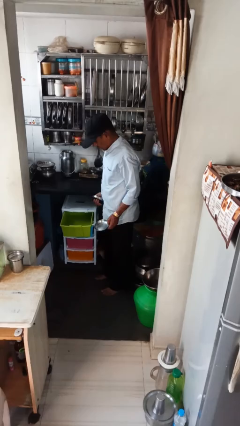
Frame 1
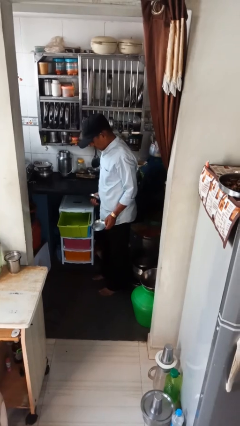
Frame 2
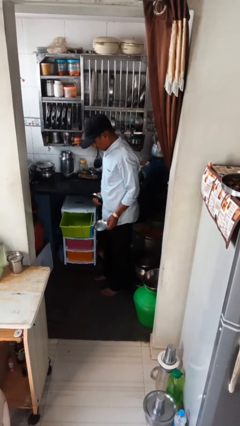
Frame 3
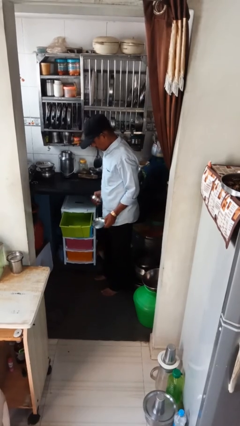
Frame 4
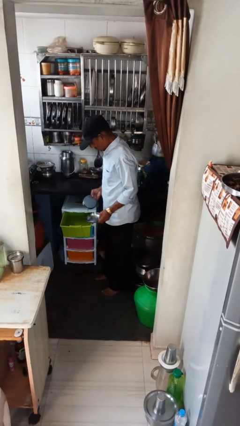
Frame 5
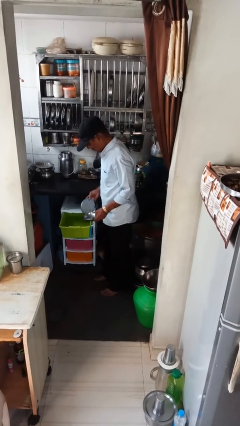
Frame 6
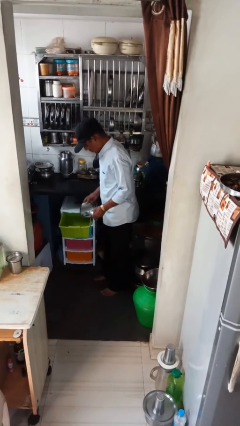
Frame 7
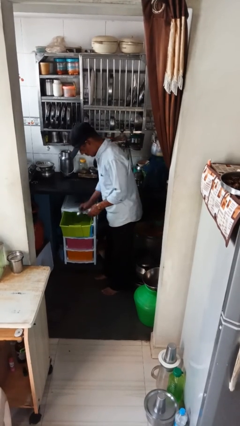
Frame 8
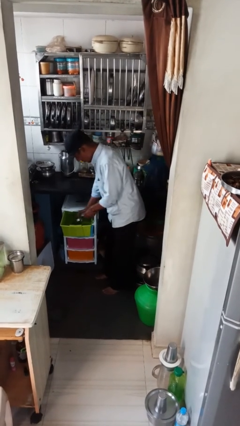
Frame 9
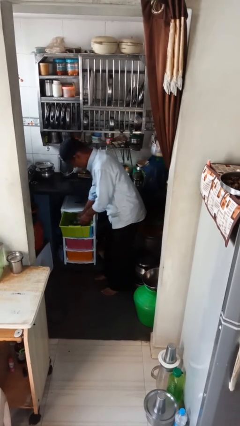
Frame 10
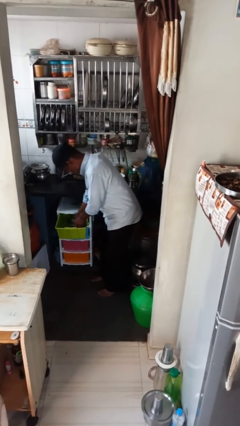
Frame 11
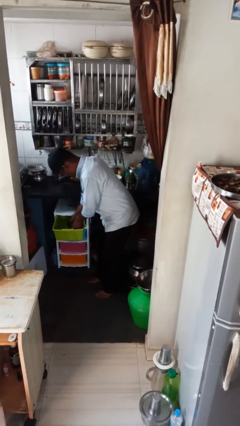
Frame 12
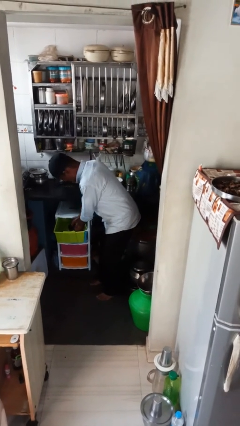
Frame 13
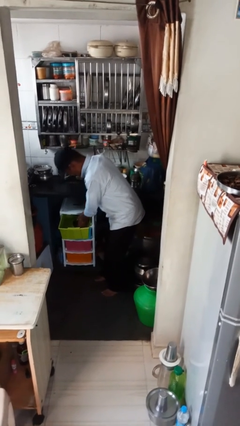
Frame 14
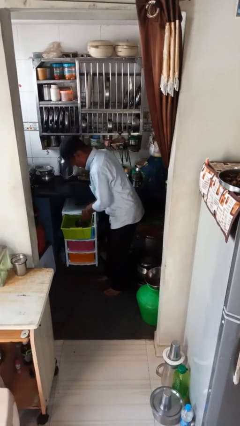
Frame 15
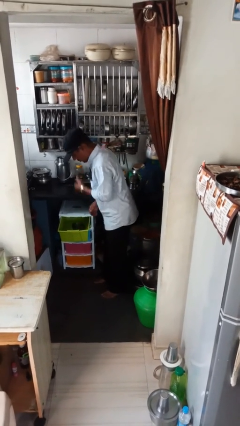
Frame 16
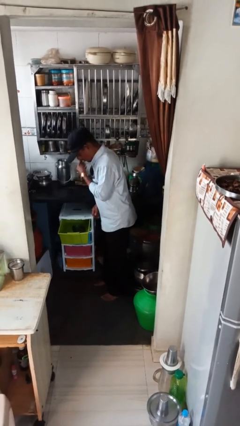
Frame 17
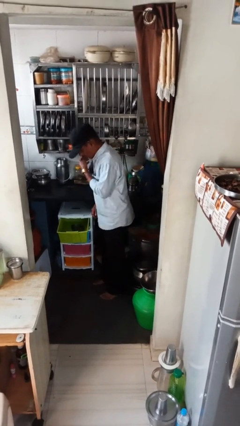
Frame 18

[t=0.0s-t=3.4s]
person puts object in cabinet

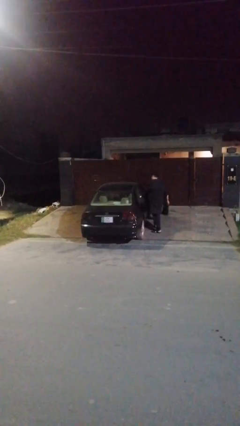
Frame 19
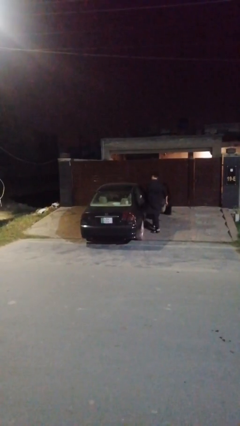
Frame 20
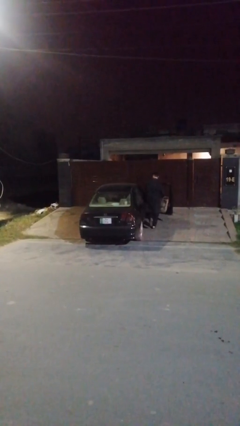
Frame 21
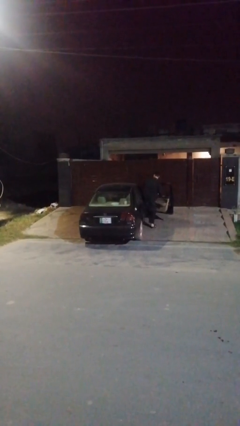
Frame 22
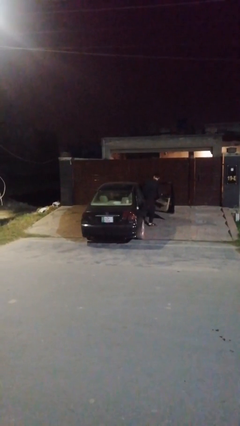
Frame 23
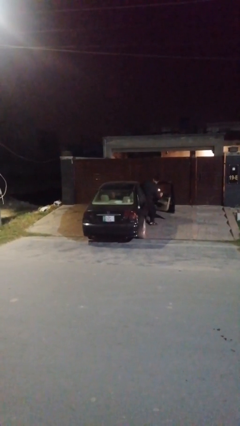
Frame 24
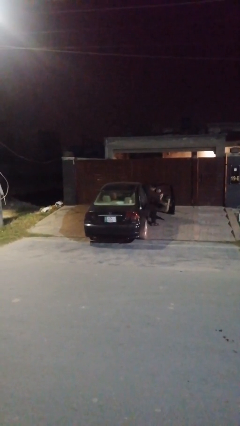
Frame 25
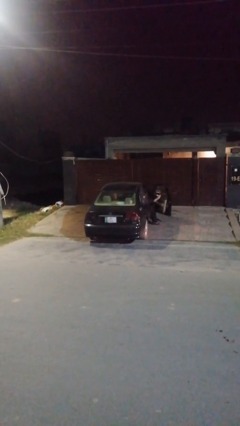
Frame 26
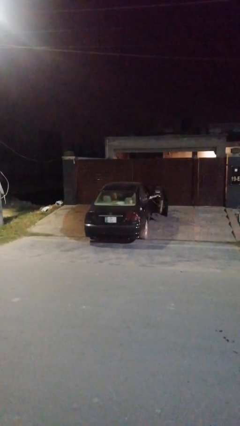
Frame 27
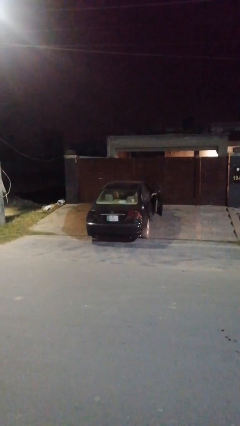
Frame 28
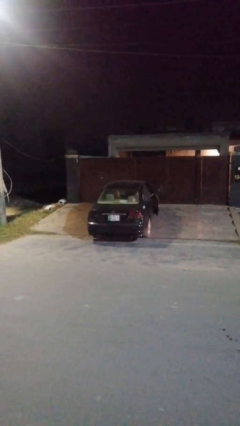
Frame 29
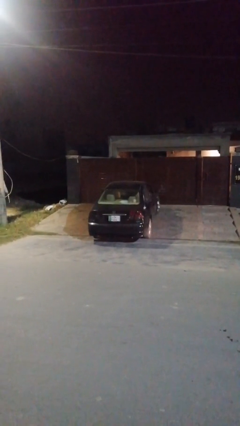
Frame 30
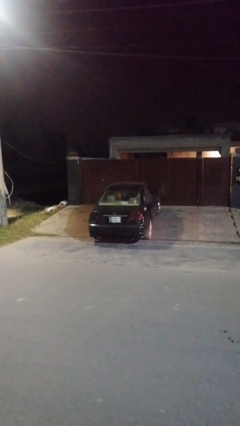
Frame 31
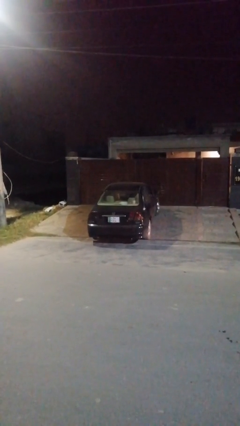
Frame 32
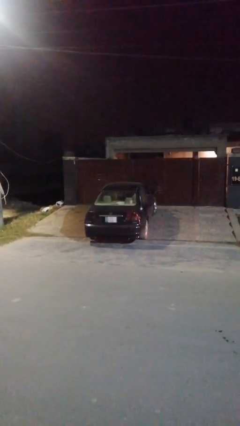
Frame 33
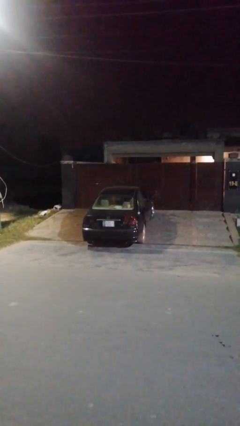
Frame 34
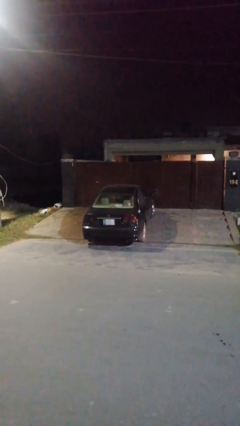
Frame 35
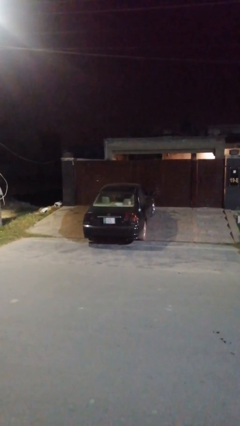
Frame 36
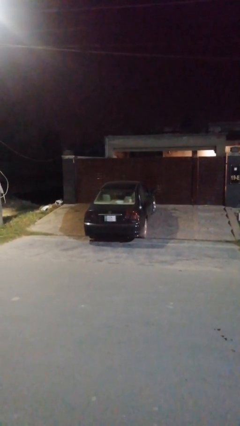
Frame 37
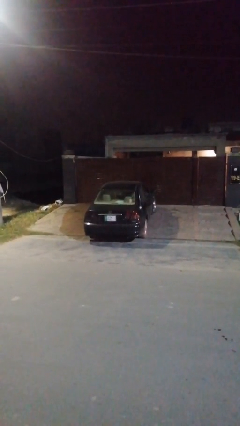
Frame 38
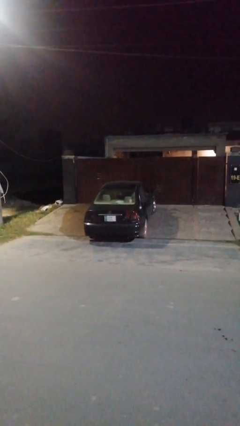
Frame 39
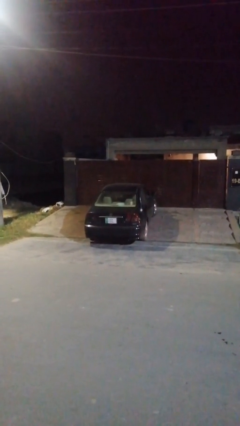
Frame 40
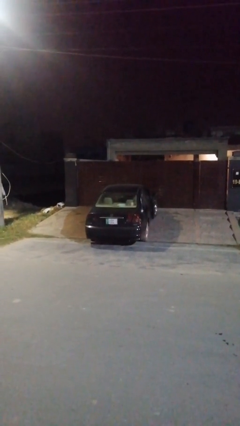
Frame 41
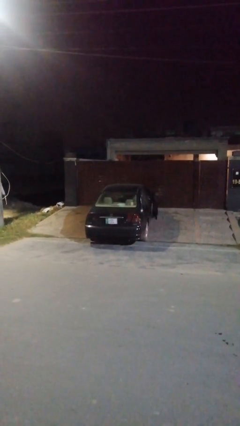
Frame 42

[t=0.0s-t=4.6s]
car picks up person

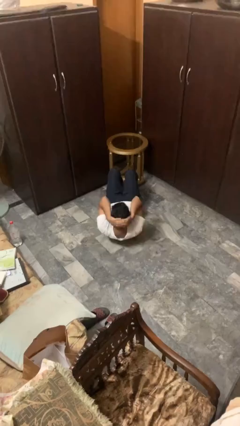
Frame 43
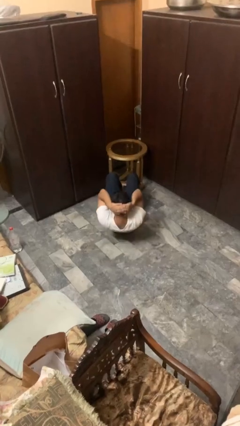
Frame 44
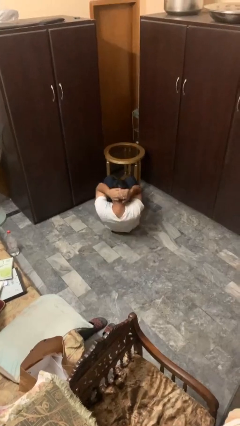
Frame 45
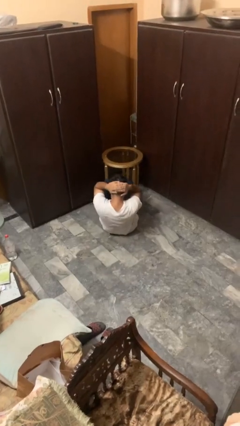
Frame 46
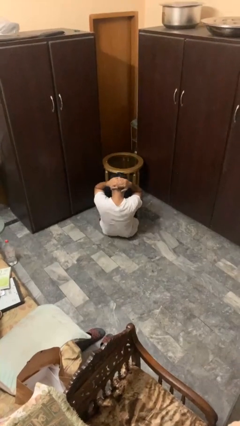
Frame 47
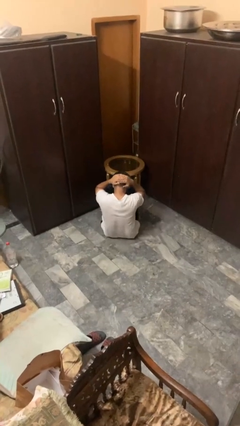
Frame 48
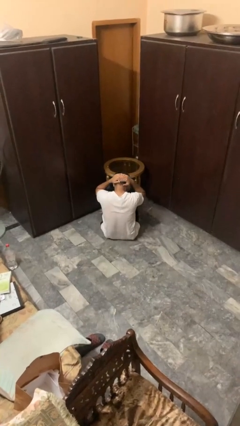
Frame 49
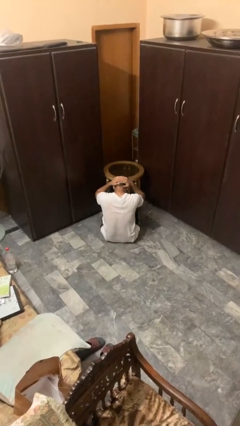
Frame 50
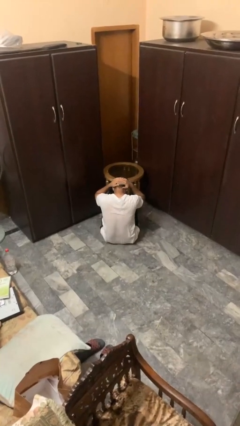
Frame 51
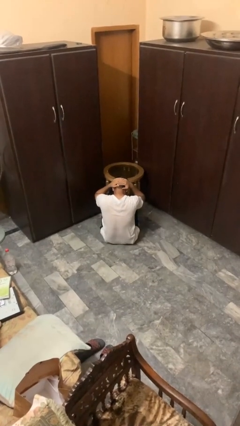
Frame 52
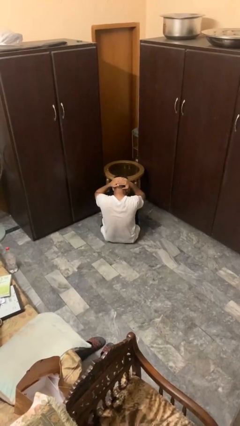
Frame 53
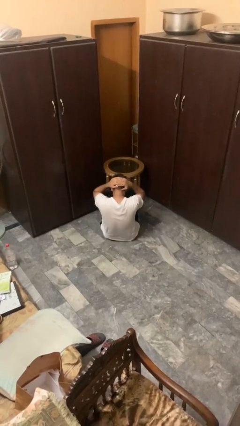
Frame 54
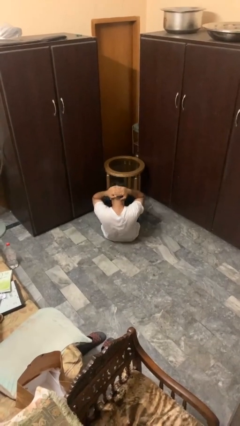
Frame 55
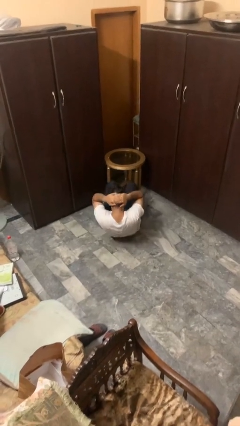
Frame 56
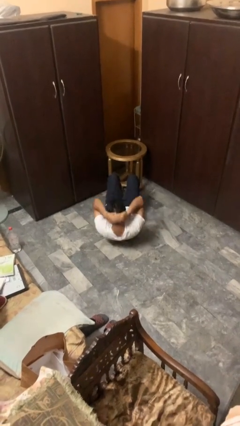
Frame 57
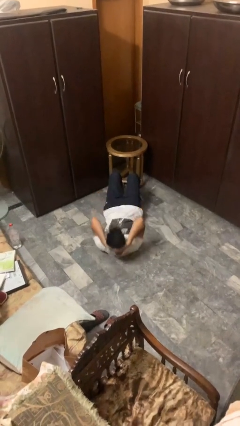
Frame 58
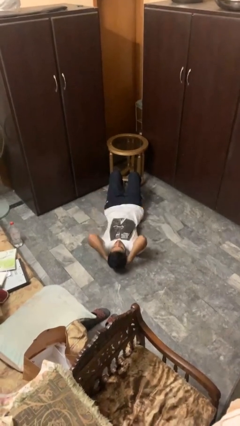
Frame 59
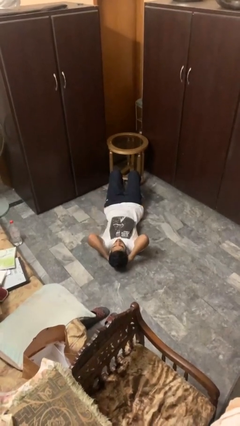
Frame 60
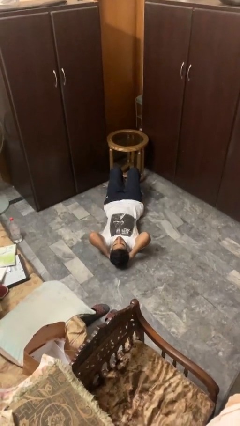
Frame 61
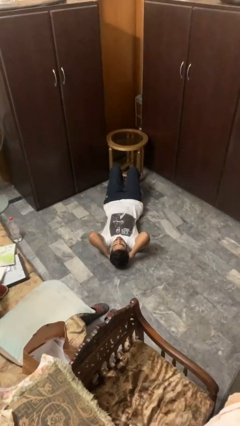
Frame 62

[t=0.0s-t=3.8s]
person exercises with situp

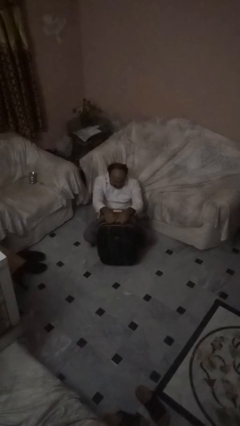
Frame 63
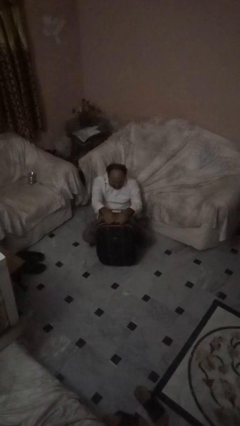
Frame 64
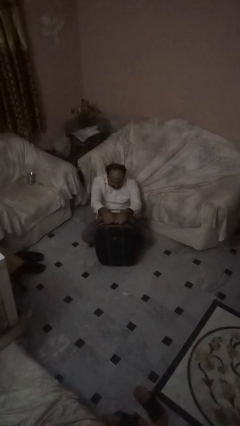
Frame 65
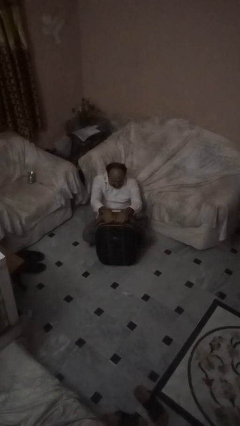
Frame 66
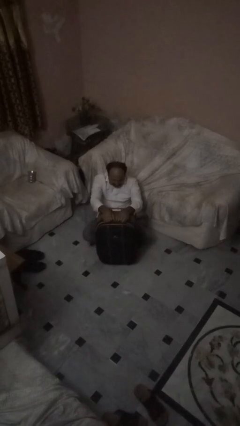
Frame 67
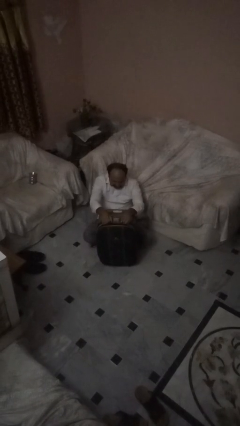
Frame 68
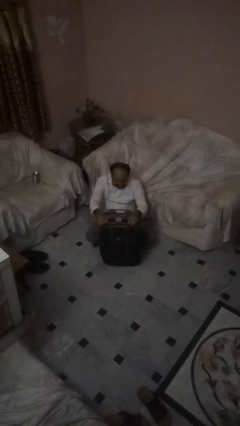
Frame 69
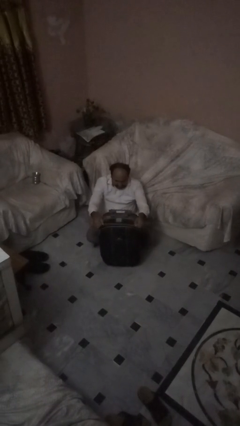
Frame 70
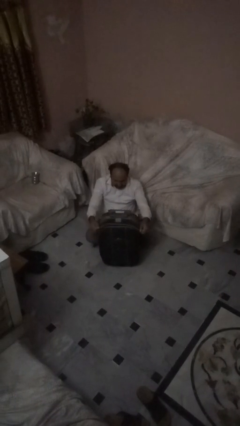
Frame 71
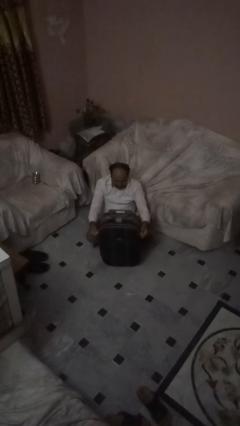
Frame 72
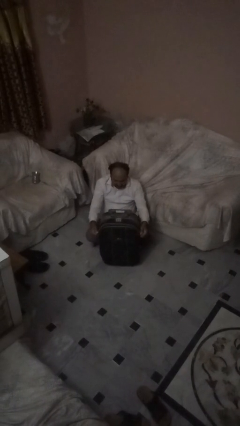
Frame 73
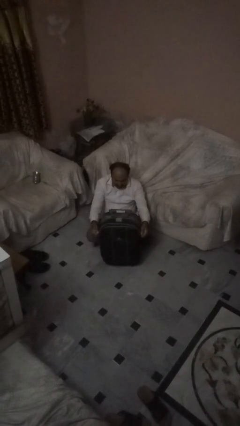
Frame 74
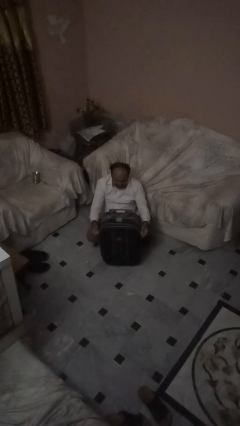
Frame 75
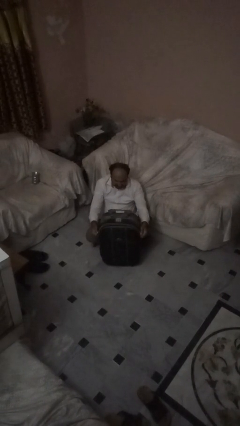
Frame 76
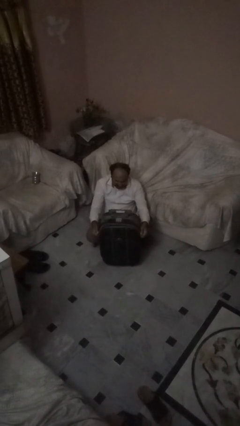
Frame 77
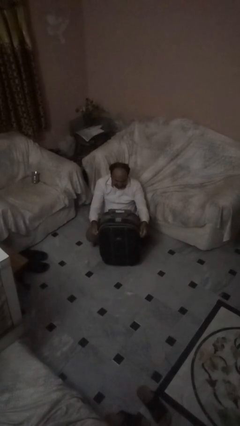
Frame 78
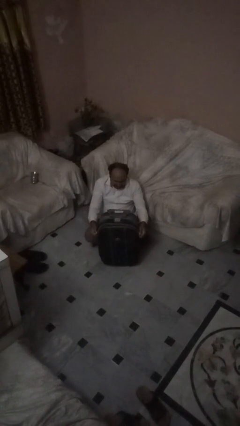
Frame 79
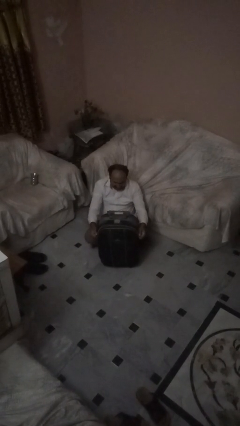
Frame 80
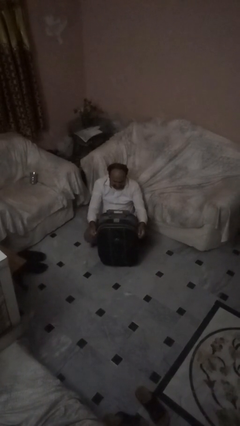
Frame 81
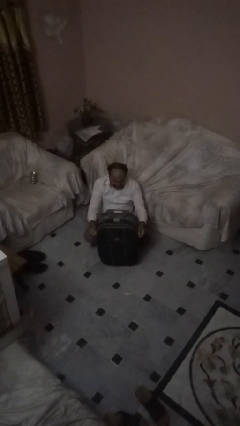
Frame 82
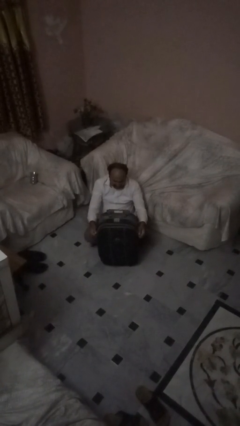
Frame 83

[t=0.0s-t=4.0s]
person opens suitcase

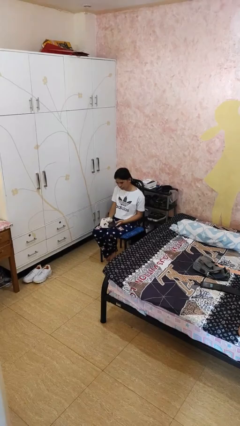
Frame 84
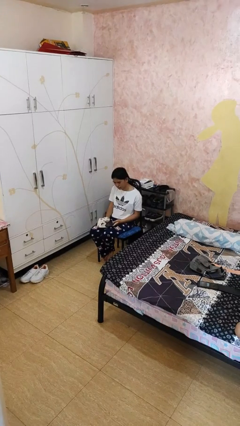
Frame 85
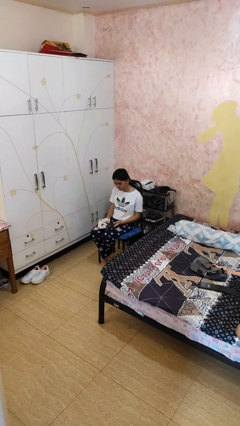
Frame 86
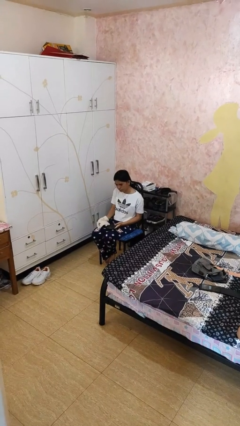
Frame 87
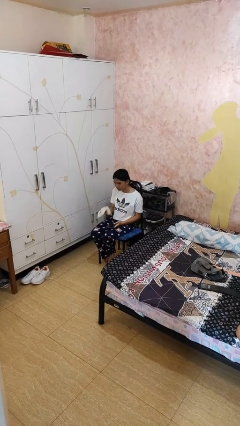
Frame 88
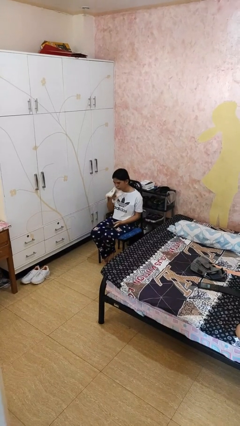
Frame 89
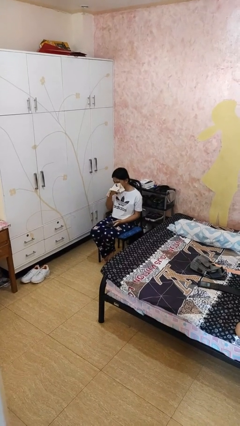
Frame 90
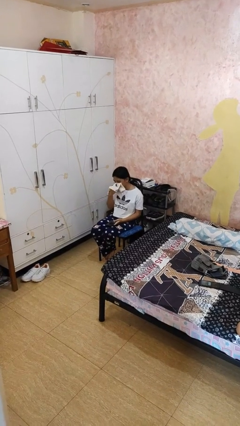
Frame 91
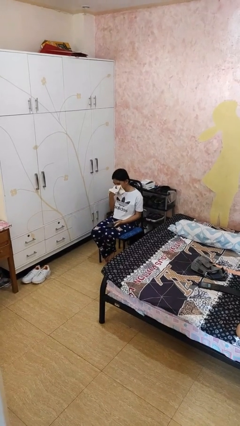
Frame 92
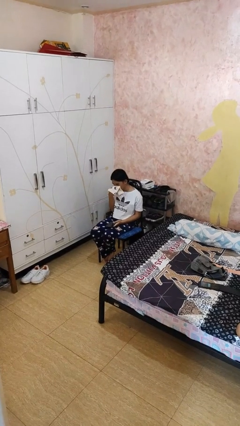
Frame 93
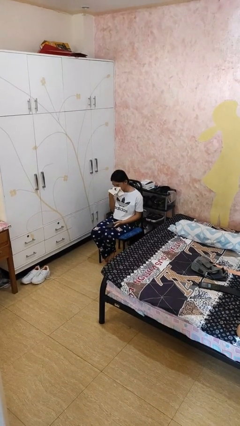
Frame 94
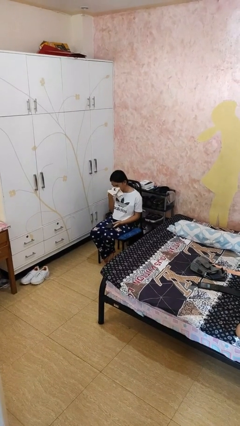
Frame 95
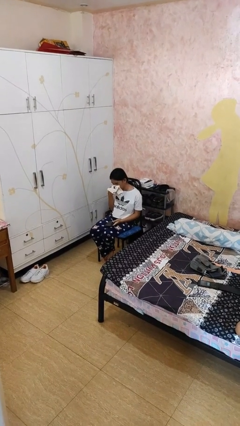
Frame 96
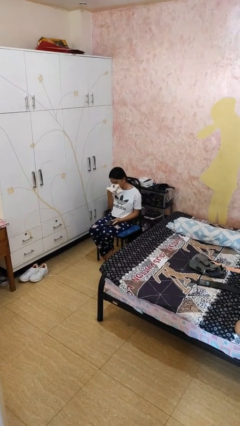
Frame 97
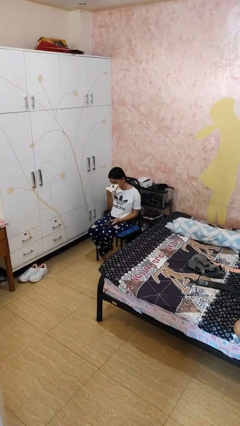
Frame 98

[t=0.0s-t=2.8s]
person blows nose
